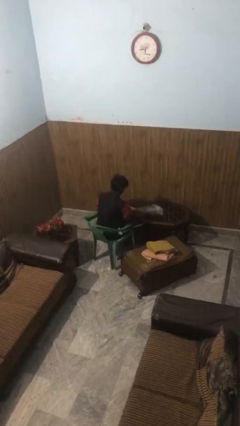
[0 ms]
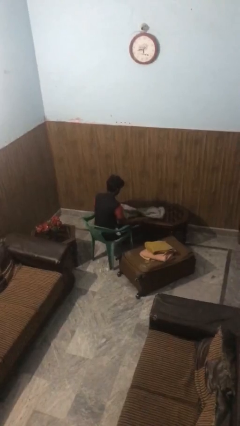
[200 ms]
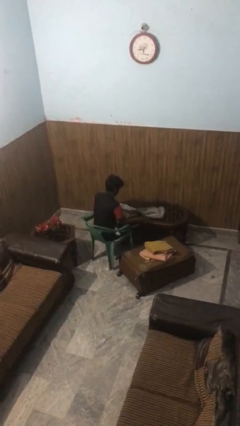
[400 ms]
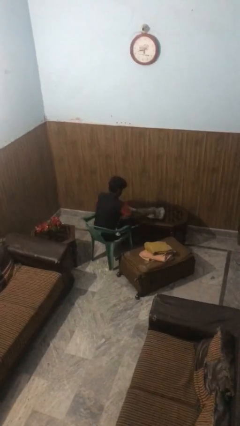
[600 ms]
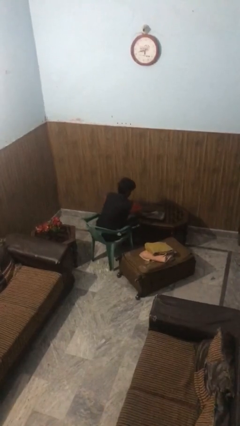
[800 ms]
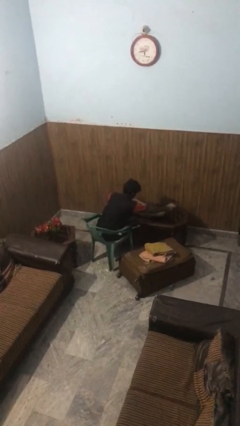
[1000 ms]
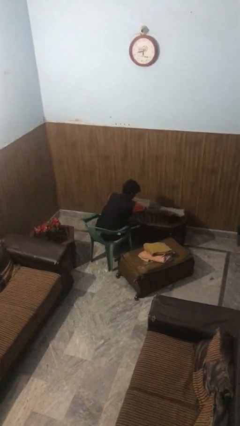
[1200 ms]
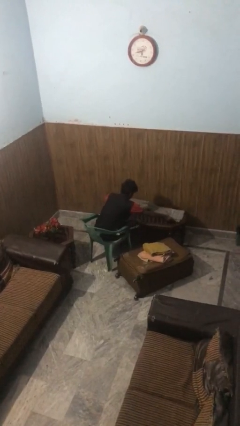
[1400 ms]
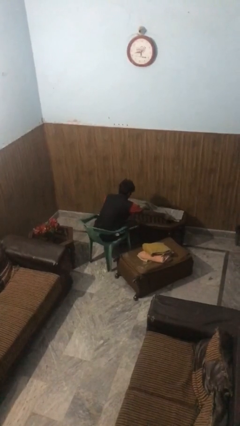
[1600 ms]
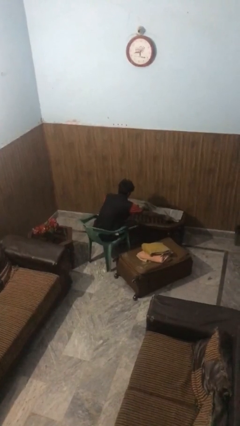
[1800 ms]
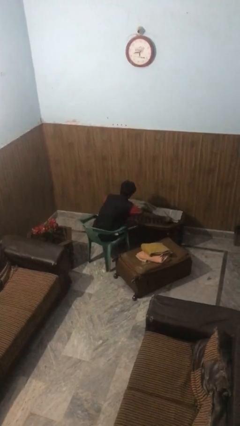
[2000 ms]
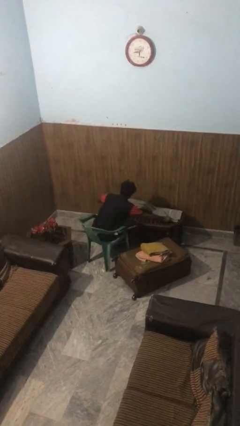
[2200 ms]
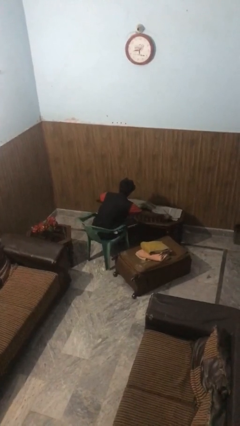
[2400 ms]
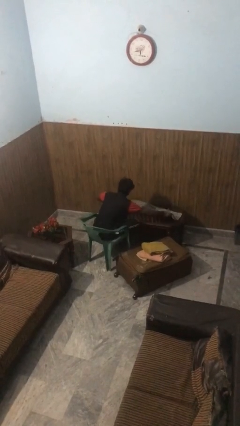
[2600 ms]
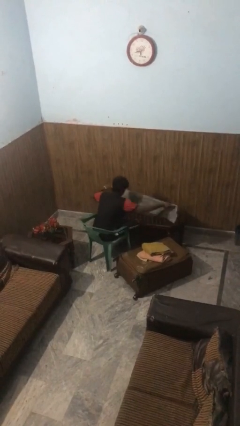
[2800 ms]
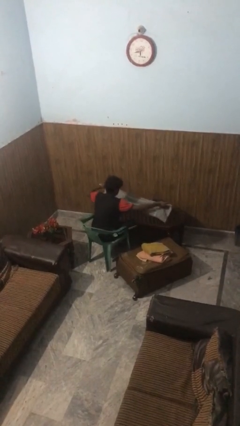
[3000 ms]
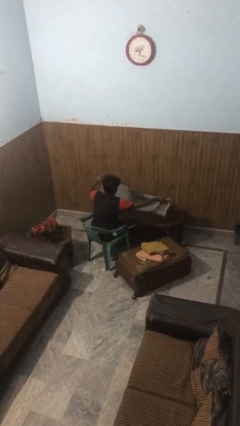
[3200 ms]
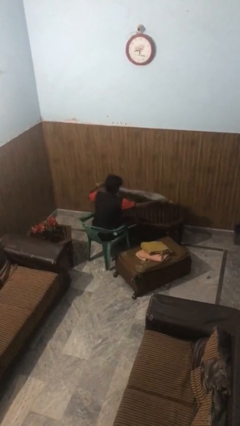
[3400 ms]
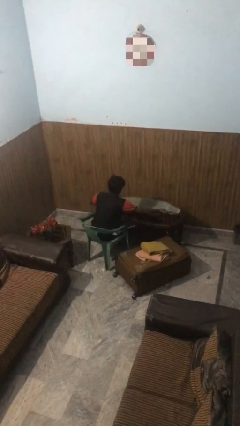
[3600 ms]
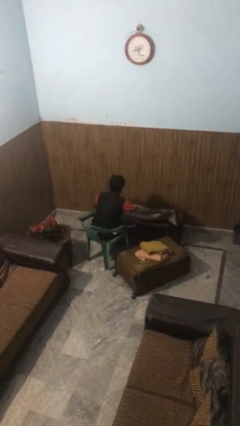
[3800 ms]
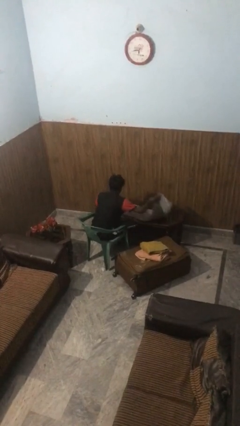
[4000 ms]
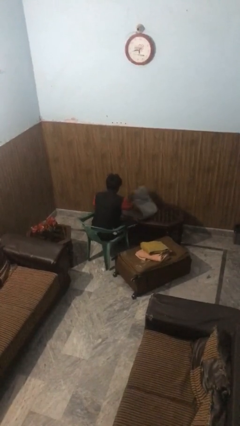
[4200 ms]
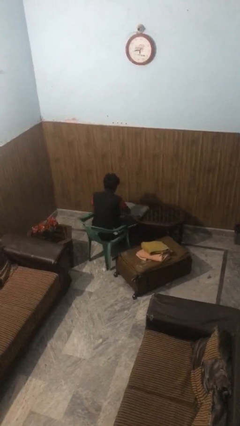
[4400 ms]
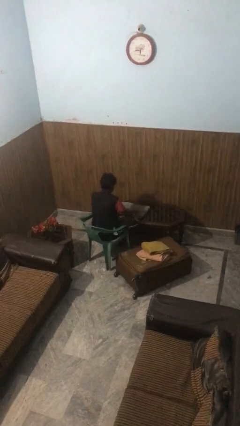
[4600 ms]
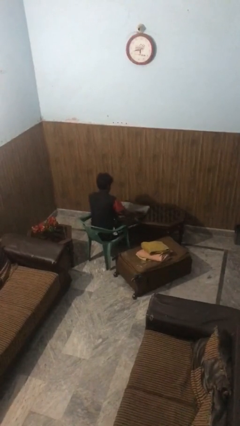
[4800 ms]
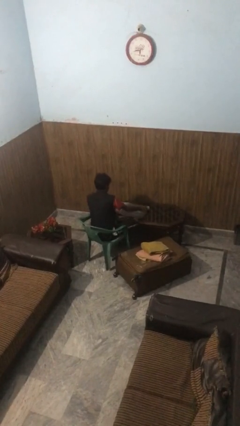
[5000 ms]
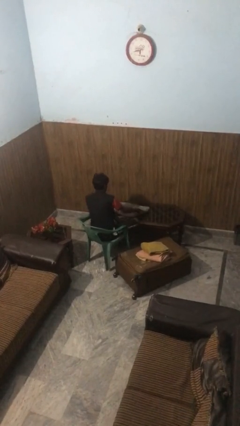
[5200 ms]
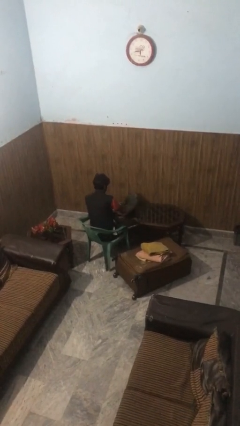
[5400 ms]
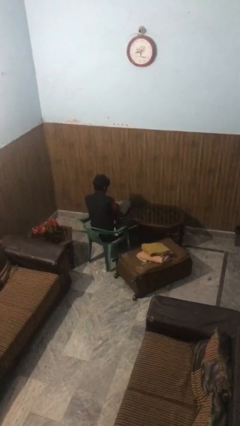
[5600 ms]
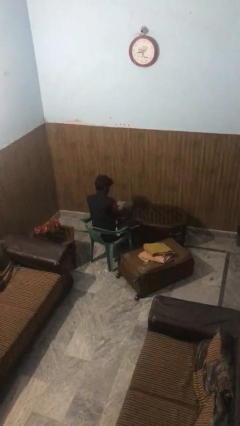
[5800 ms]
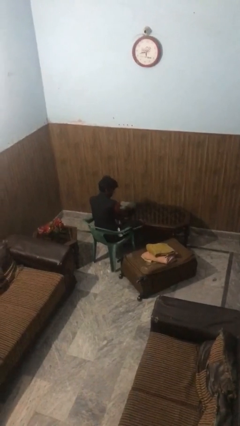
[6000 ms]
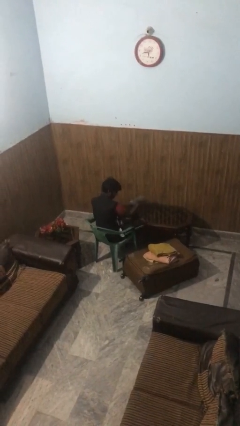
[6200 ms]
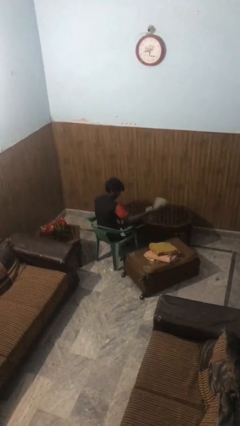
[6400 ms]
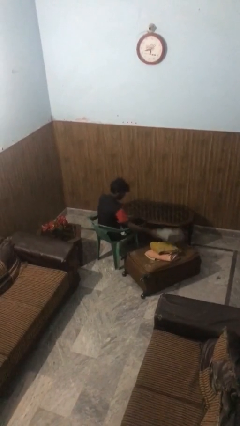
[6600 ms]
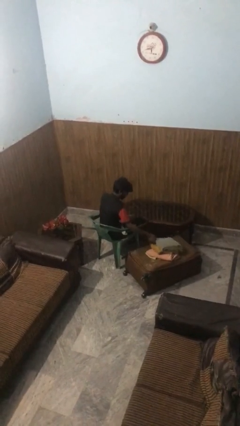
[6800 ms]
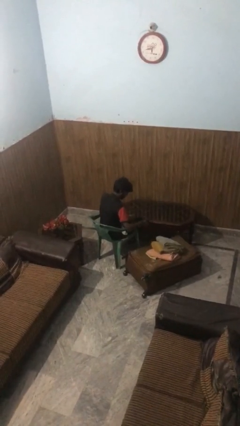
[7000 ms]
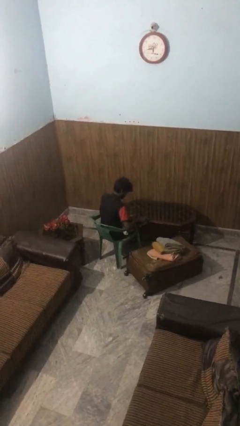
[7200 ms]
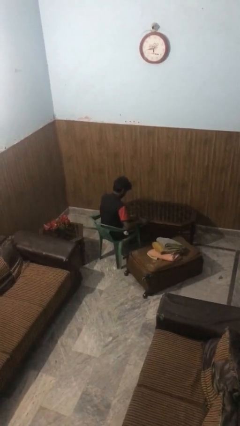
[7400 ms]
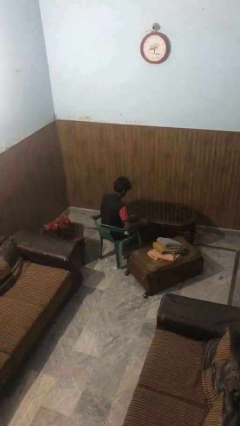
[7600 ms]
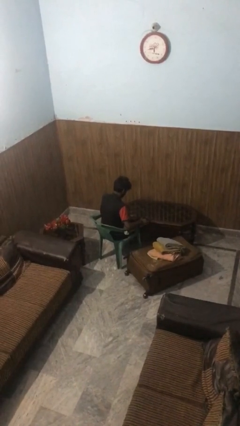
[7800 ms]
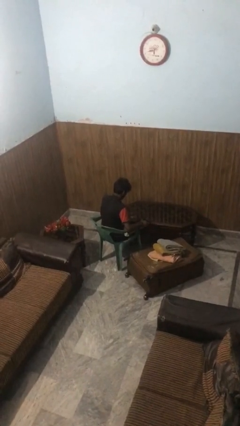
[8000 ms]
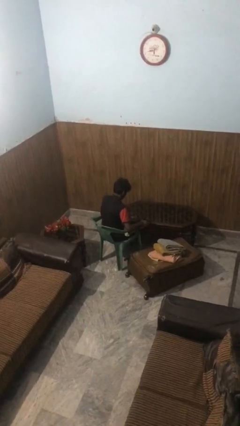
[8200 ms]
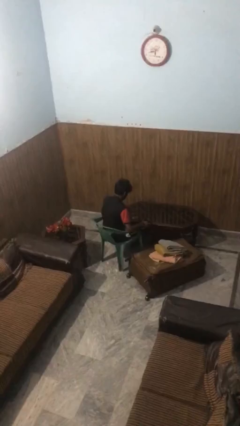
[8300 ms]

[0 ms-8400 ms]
person folds towel

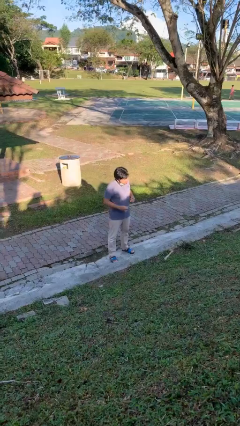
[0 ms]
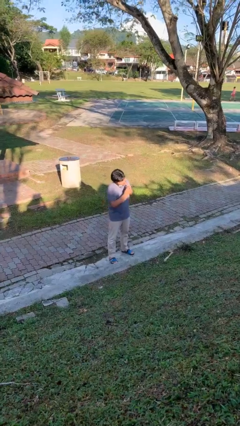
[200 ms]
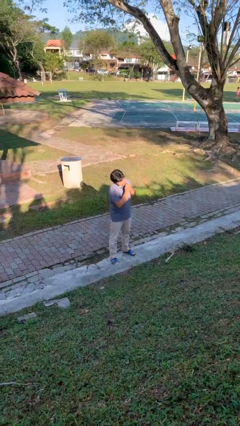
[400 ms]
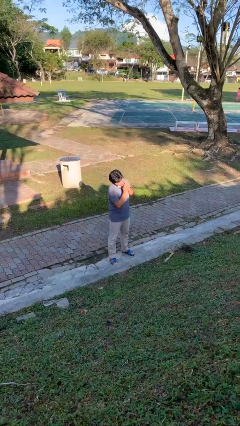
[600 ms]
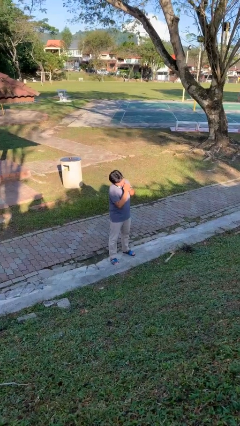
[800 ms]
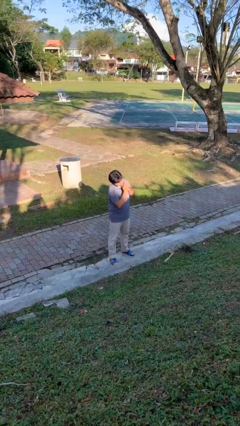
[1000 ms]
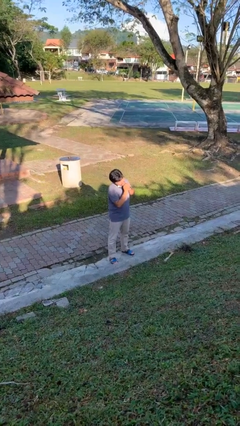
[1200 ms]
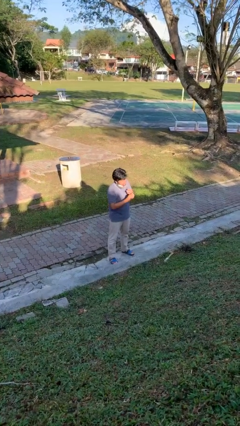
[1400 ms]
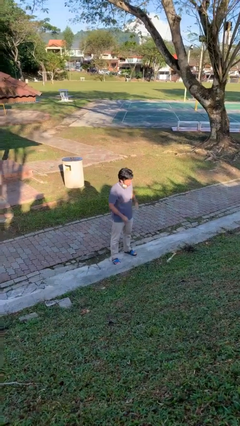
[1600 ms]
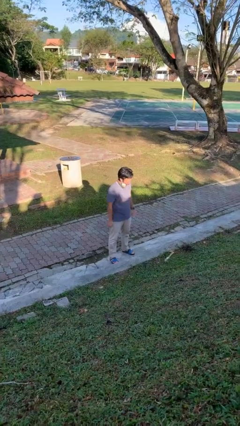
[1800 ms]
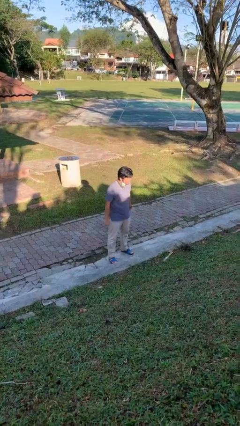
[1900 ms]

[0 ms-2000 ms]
person flosses

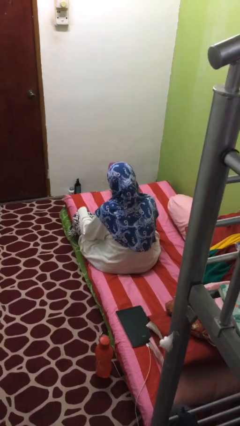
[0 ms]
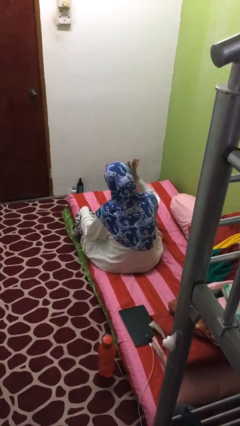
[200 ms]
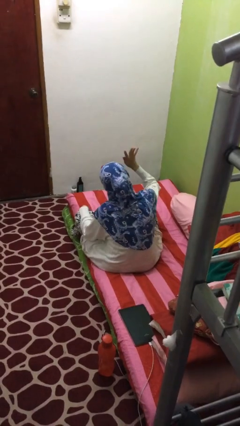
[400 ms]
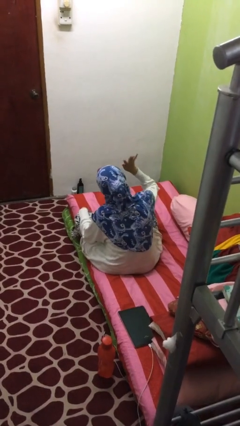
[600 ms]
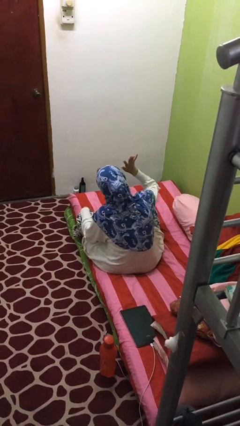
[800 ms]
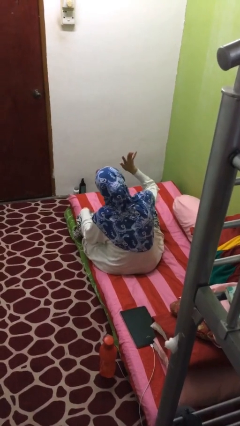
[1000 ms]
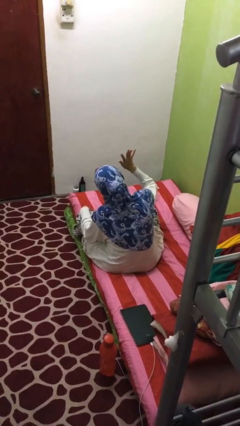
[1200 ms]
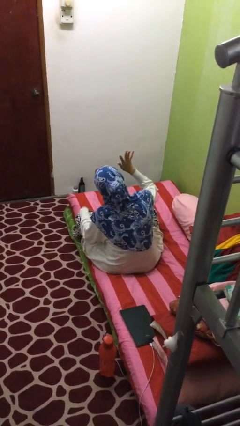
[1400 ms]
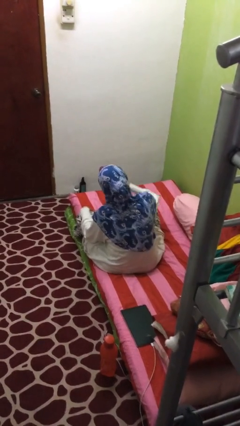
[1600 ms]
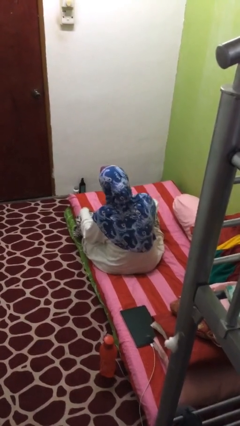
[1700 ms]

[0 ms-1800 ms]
person gestures number five

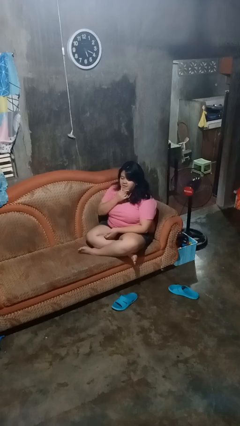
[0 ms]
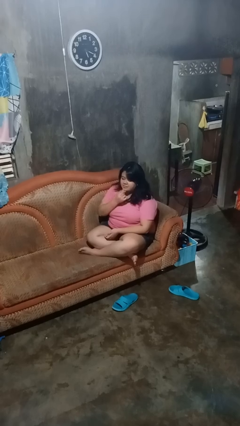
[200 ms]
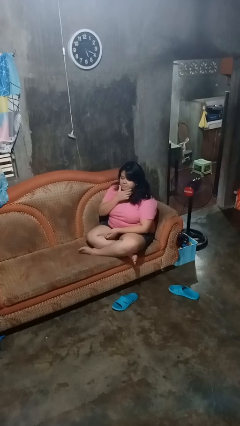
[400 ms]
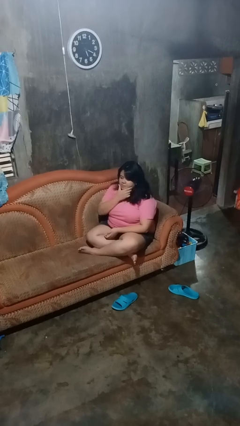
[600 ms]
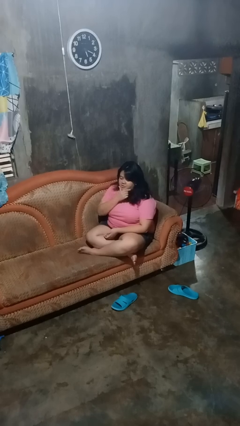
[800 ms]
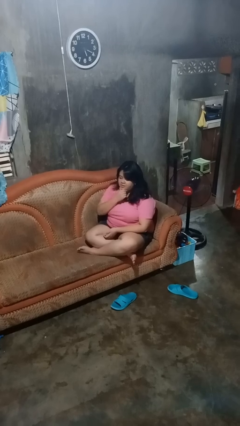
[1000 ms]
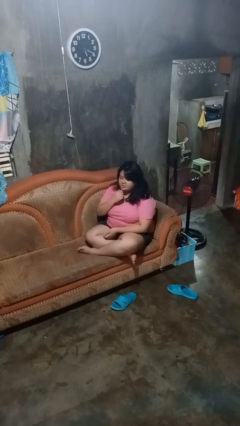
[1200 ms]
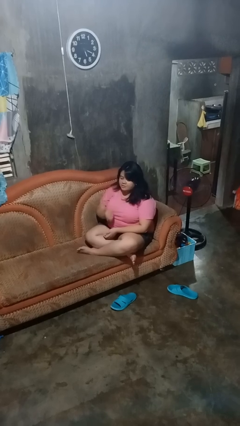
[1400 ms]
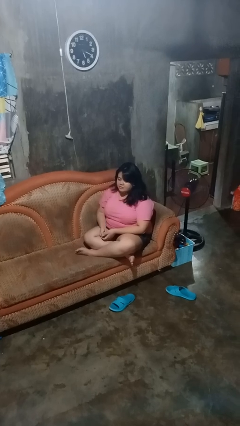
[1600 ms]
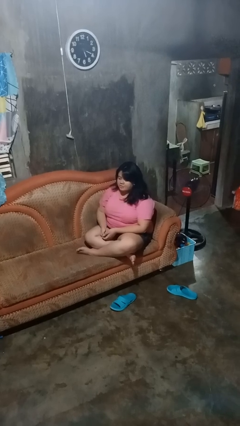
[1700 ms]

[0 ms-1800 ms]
person strokes chin

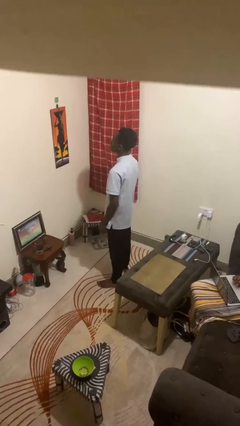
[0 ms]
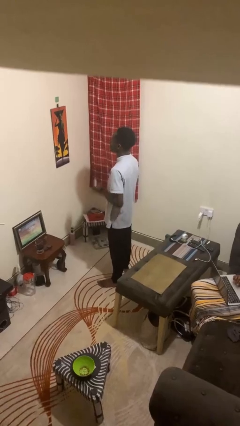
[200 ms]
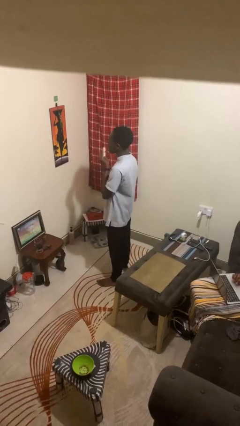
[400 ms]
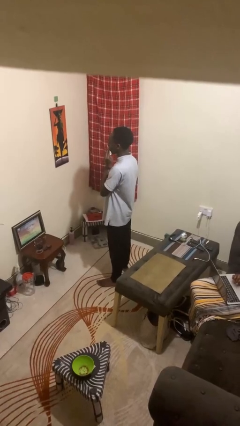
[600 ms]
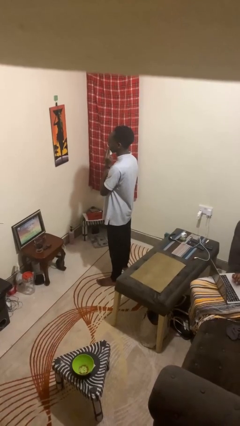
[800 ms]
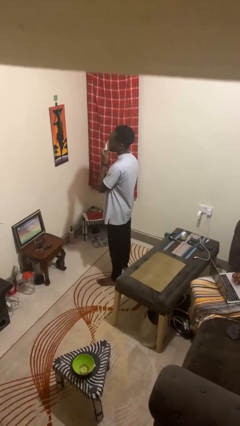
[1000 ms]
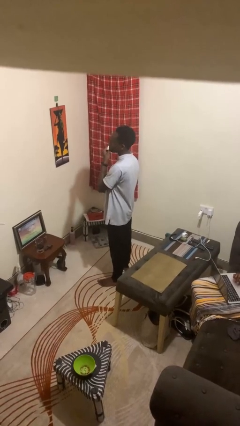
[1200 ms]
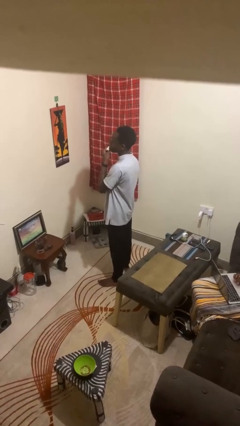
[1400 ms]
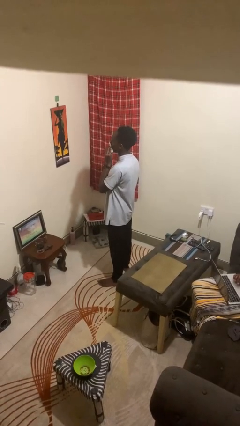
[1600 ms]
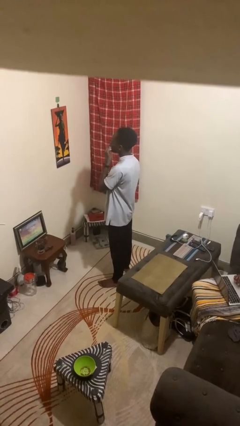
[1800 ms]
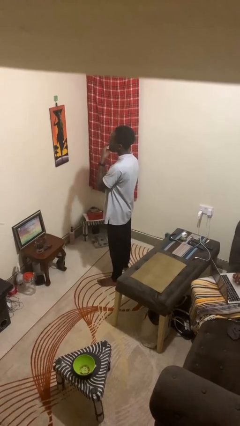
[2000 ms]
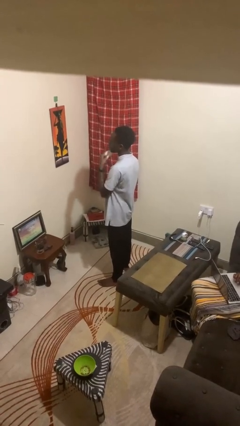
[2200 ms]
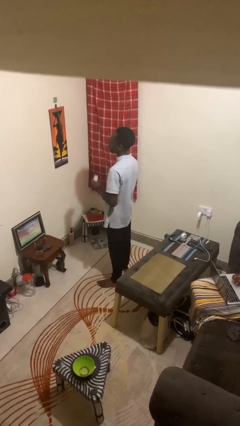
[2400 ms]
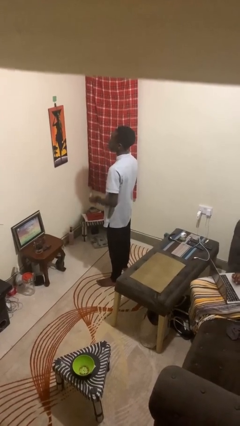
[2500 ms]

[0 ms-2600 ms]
person wipes mouth with napkin

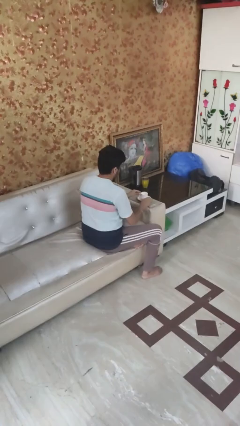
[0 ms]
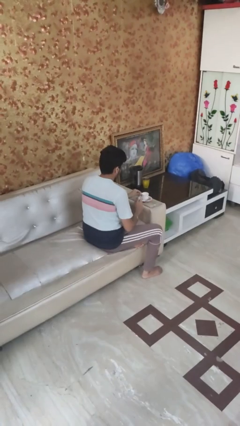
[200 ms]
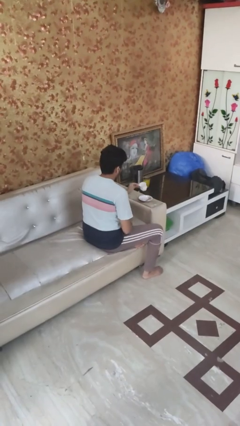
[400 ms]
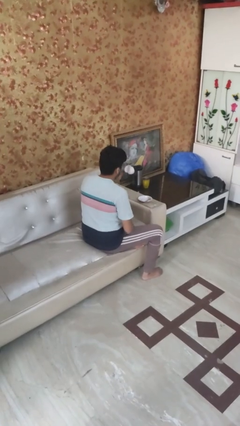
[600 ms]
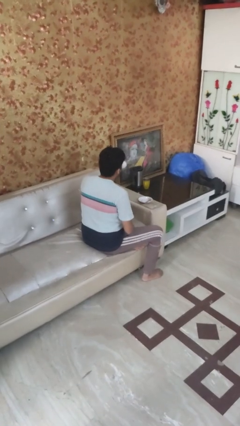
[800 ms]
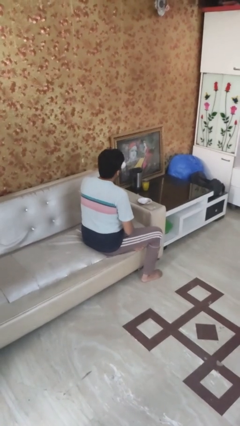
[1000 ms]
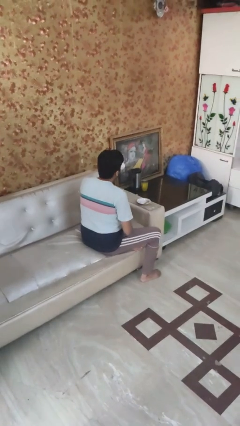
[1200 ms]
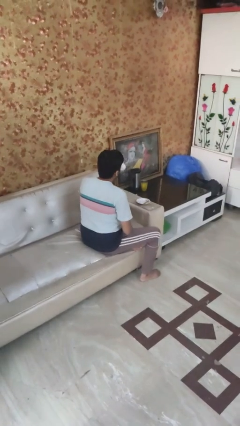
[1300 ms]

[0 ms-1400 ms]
person drinks from mug
